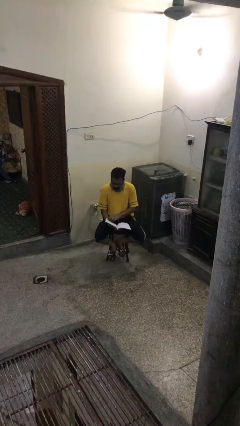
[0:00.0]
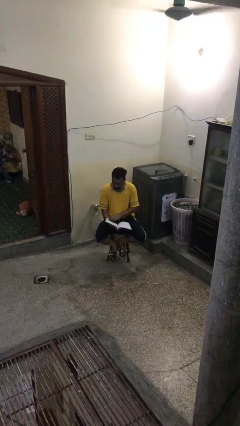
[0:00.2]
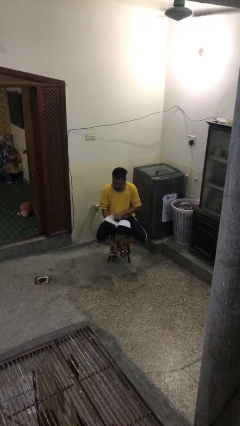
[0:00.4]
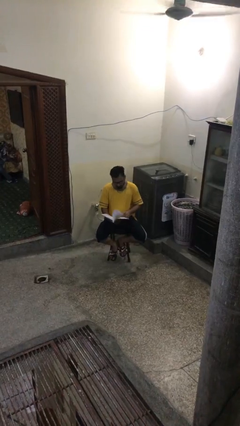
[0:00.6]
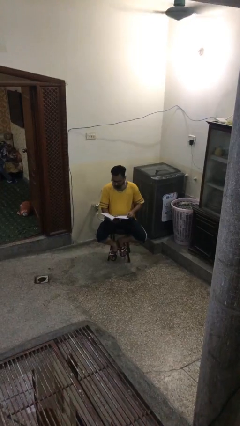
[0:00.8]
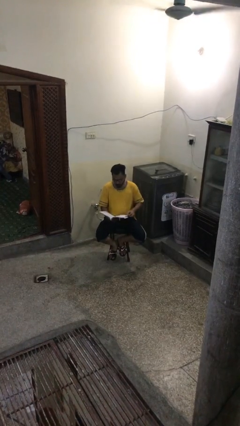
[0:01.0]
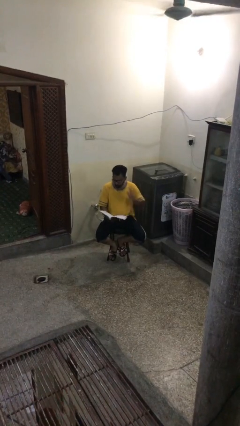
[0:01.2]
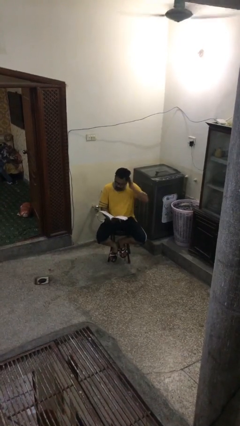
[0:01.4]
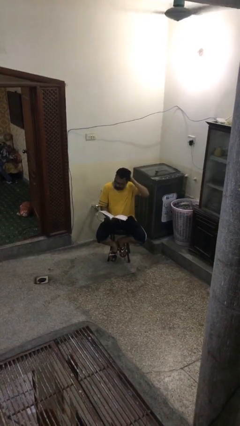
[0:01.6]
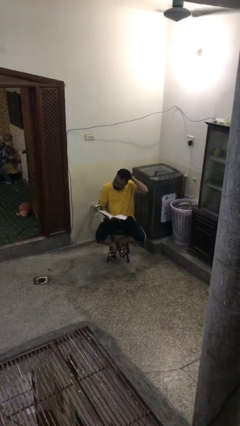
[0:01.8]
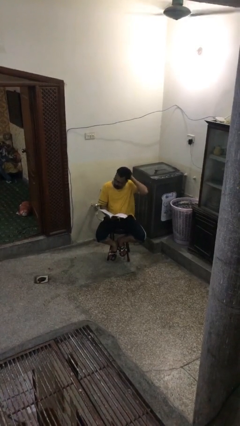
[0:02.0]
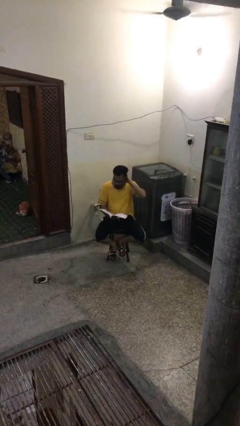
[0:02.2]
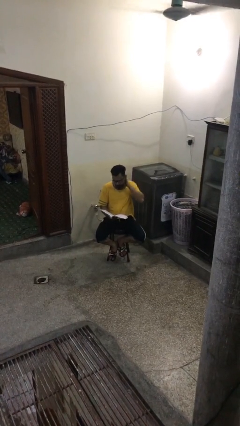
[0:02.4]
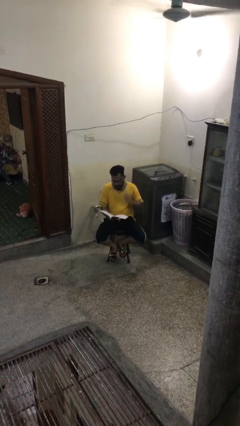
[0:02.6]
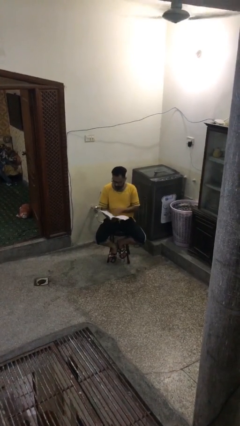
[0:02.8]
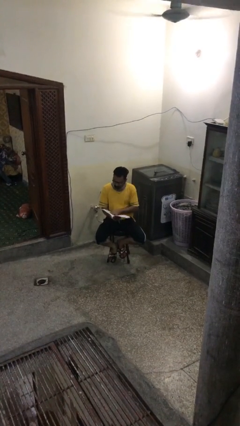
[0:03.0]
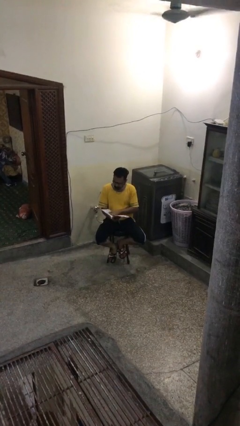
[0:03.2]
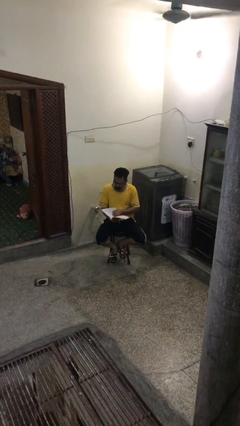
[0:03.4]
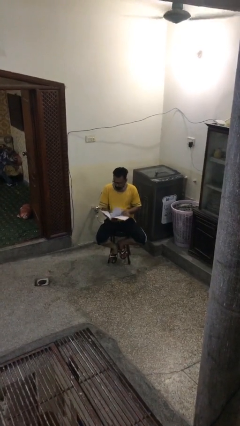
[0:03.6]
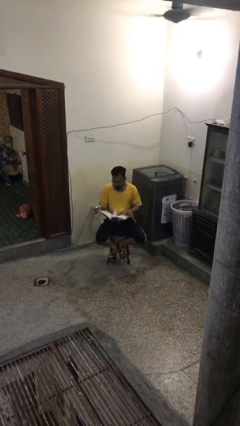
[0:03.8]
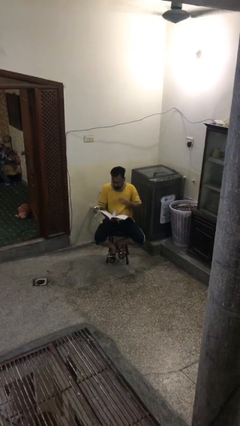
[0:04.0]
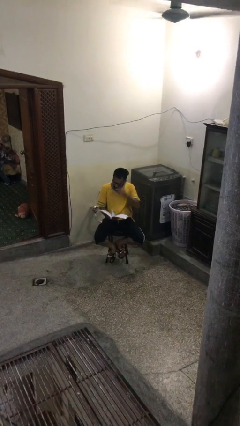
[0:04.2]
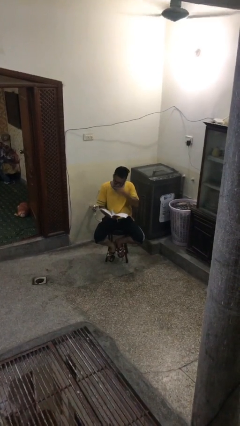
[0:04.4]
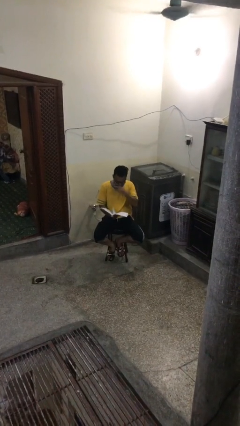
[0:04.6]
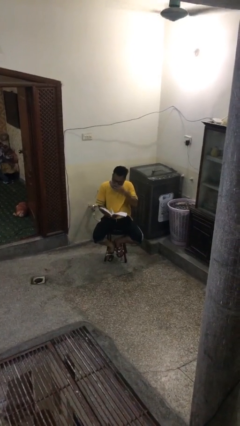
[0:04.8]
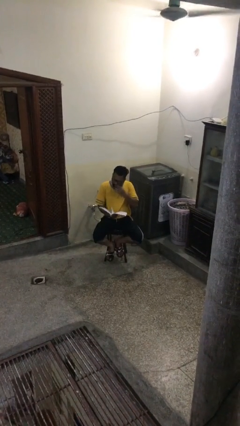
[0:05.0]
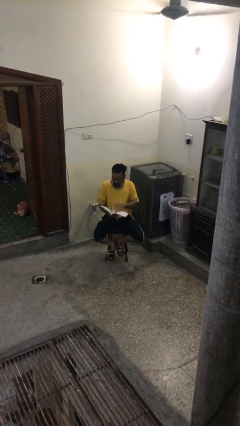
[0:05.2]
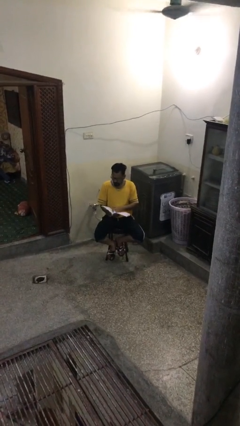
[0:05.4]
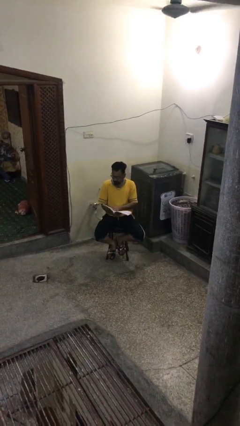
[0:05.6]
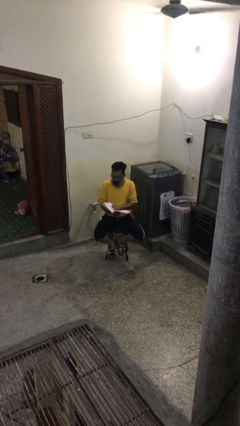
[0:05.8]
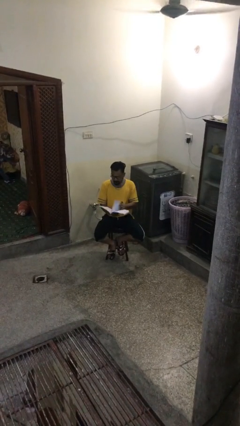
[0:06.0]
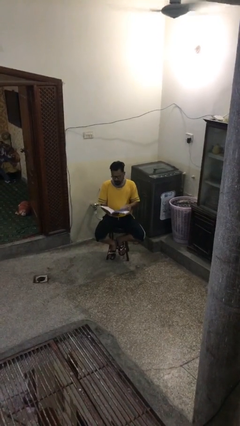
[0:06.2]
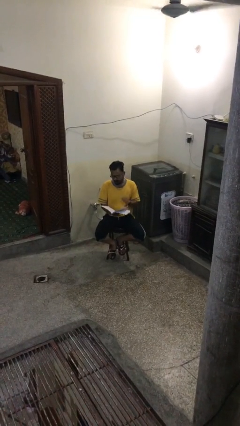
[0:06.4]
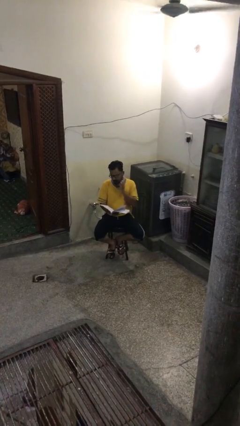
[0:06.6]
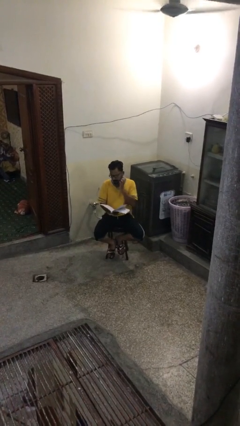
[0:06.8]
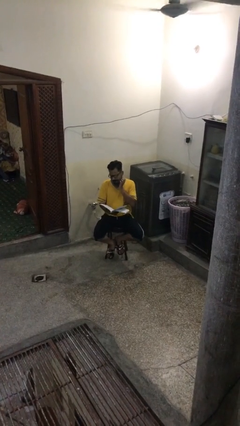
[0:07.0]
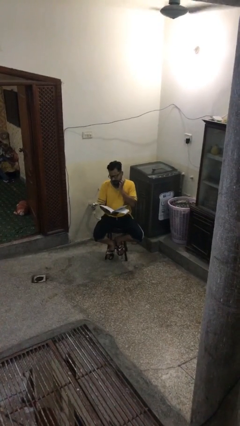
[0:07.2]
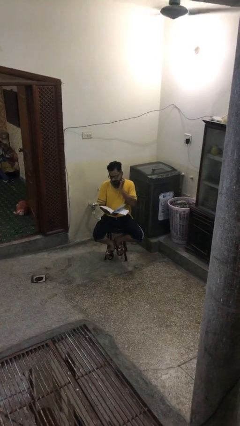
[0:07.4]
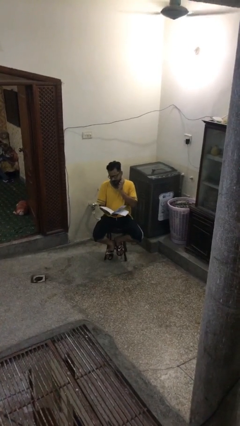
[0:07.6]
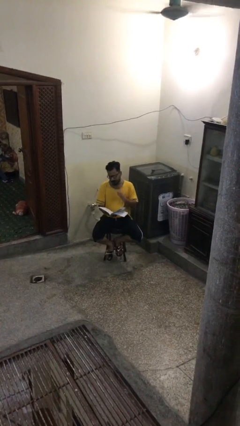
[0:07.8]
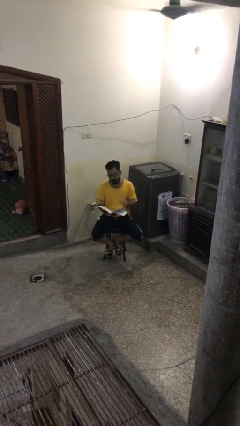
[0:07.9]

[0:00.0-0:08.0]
person reads document

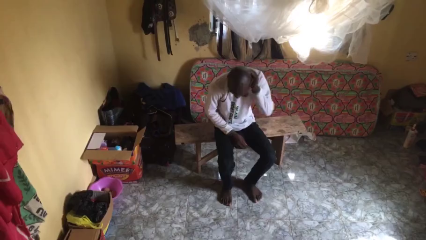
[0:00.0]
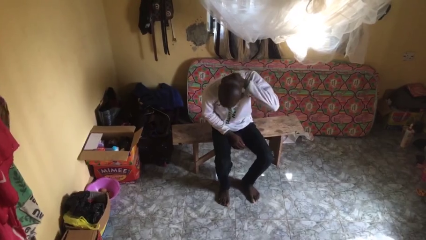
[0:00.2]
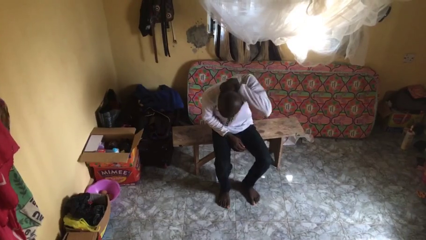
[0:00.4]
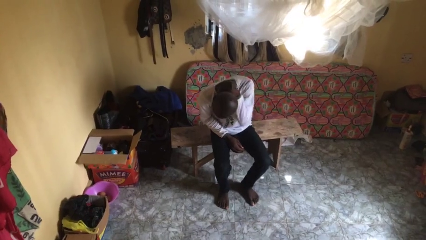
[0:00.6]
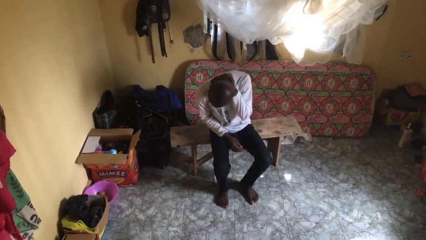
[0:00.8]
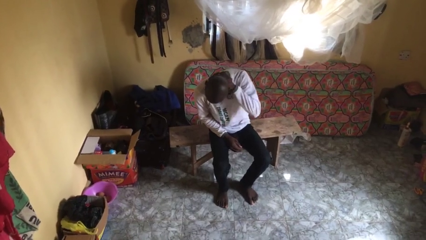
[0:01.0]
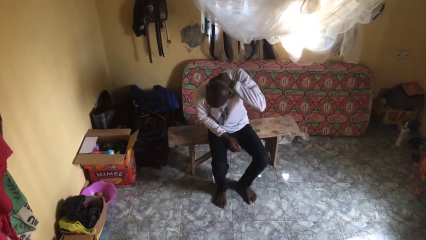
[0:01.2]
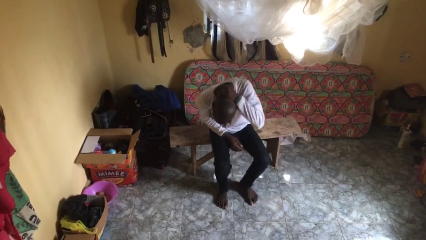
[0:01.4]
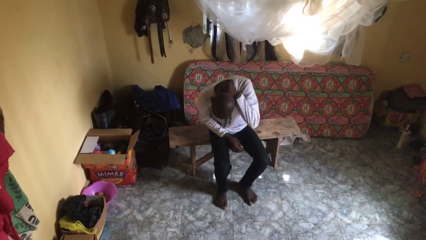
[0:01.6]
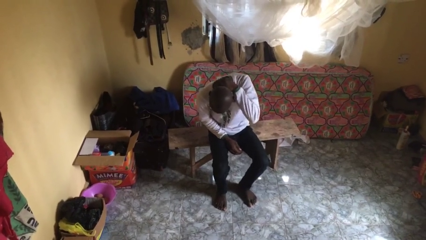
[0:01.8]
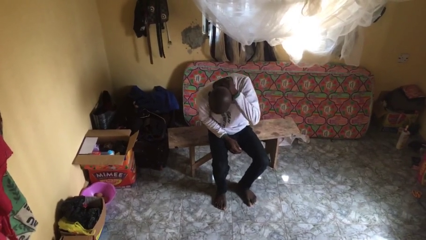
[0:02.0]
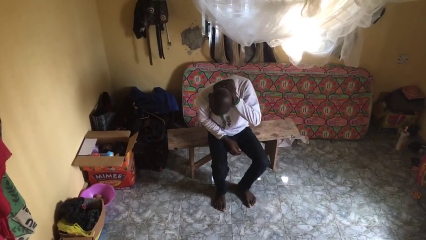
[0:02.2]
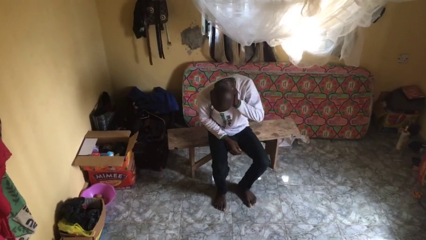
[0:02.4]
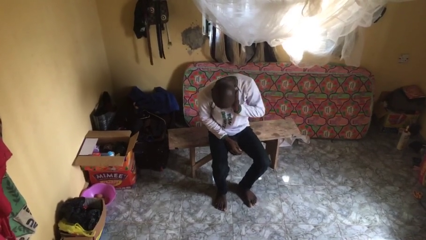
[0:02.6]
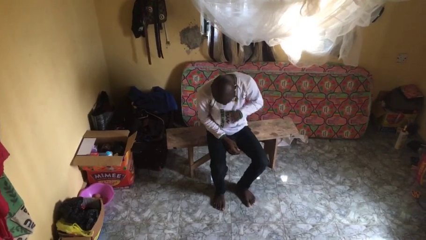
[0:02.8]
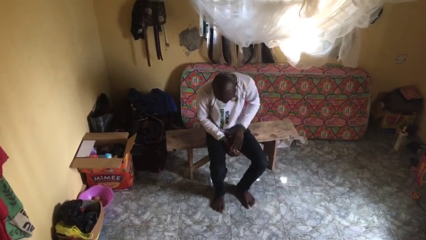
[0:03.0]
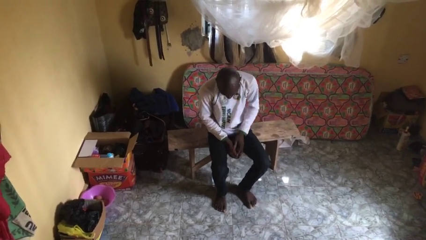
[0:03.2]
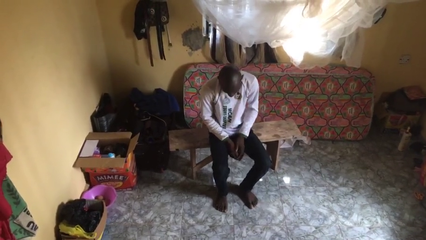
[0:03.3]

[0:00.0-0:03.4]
person rubs neck

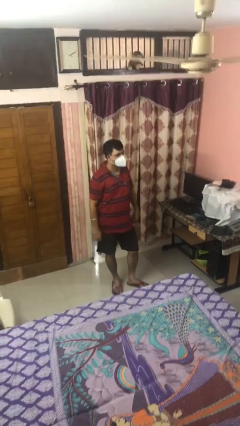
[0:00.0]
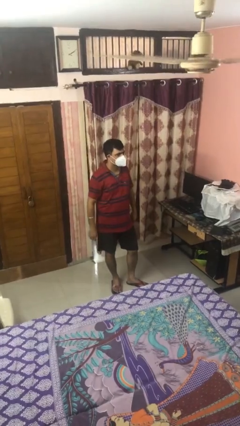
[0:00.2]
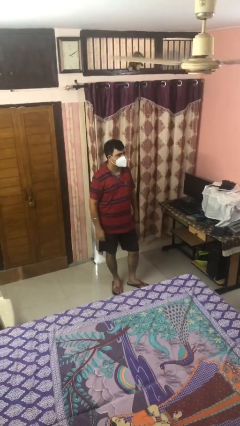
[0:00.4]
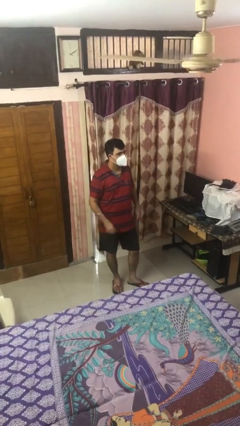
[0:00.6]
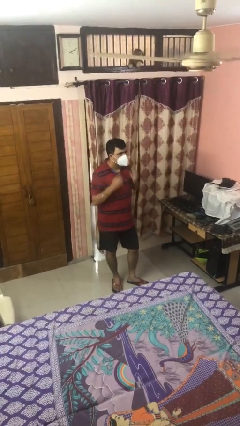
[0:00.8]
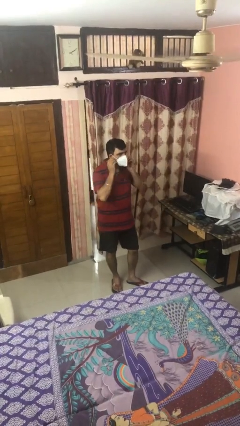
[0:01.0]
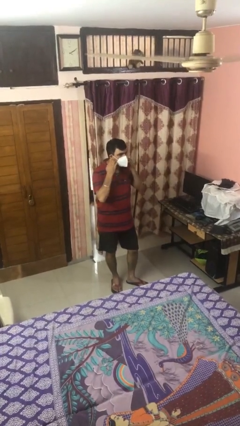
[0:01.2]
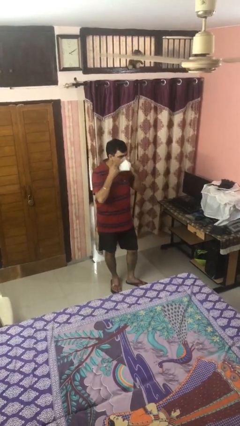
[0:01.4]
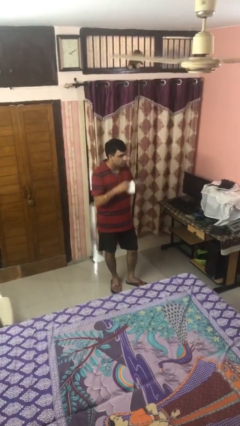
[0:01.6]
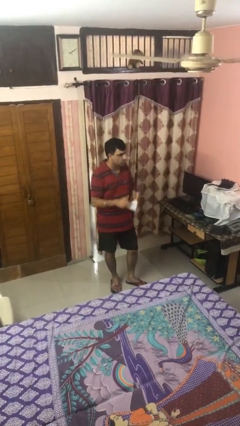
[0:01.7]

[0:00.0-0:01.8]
person takes off facemask

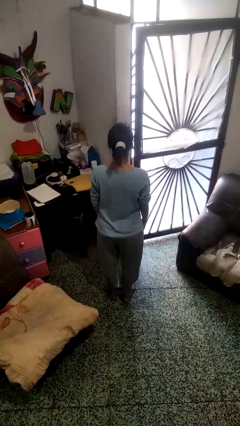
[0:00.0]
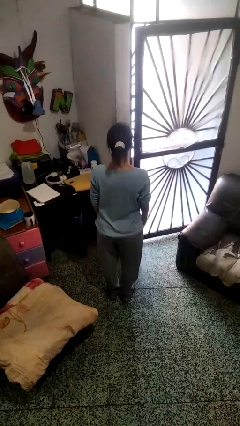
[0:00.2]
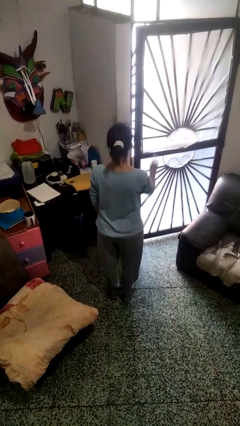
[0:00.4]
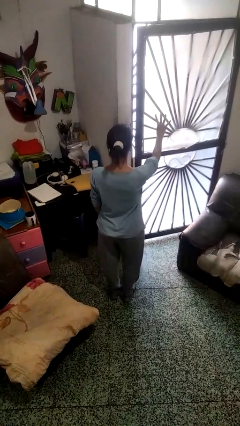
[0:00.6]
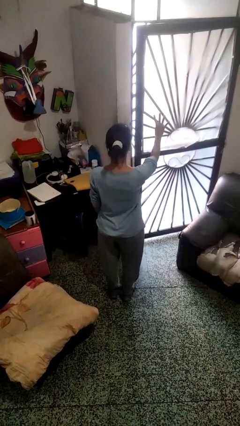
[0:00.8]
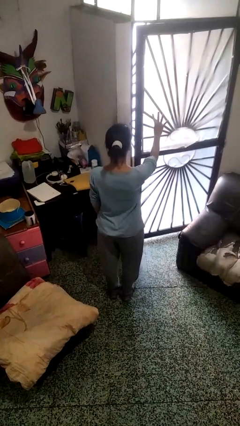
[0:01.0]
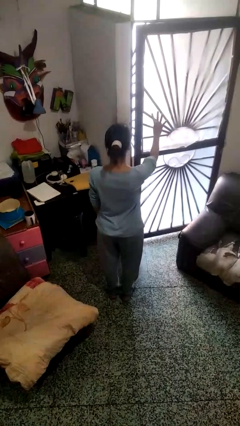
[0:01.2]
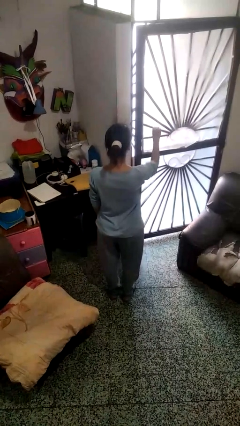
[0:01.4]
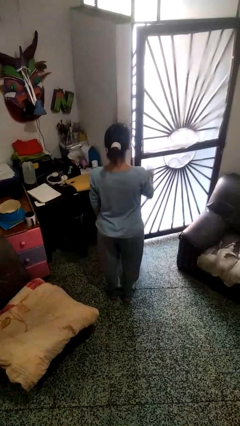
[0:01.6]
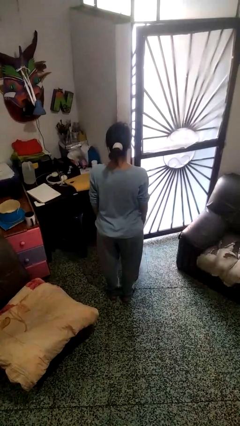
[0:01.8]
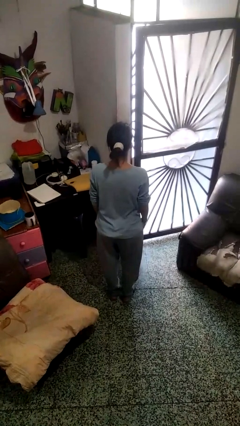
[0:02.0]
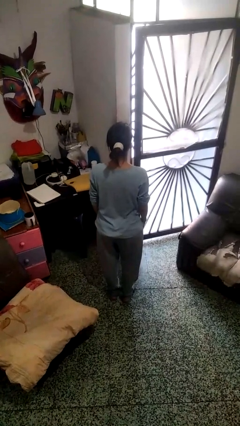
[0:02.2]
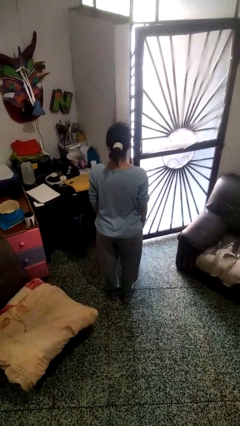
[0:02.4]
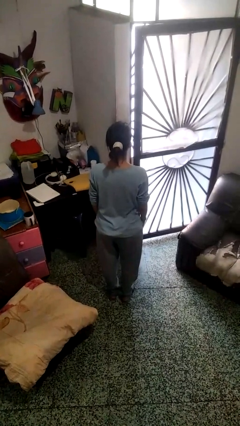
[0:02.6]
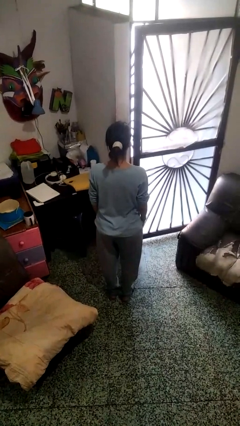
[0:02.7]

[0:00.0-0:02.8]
person gestures number four

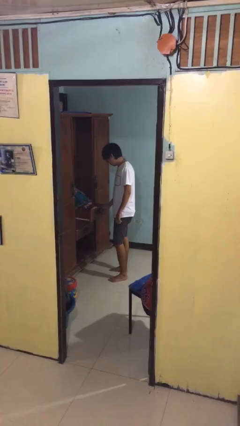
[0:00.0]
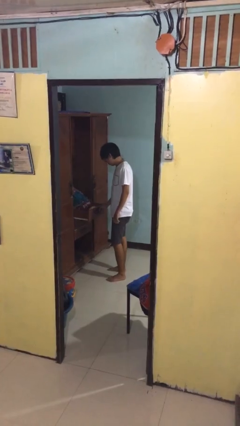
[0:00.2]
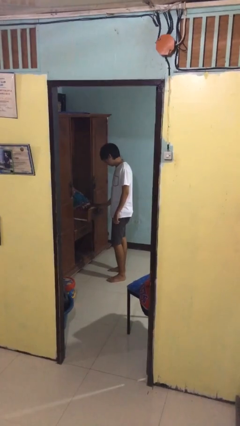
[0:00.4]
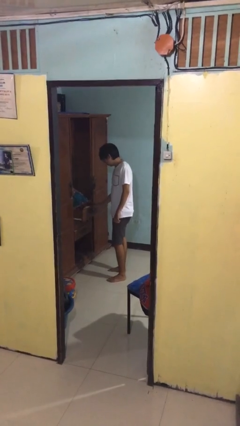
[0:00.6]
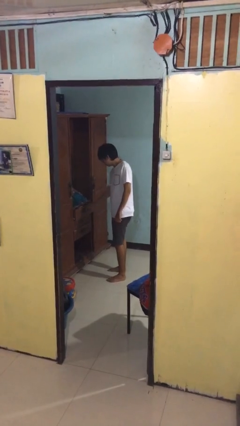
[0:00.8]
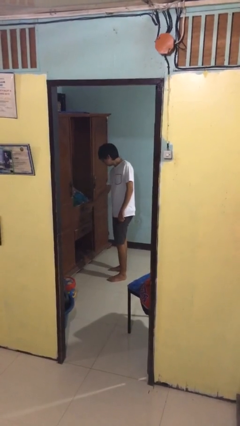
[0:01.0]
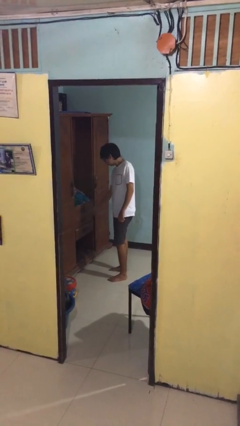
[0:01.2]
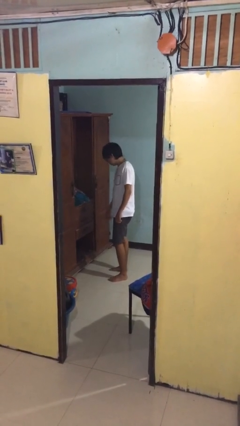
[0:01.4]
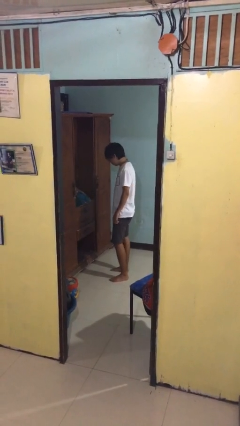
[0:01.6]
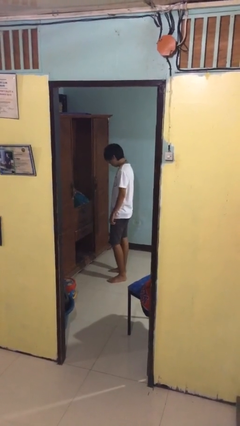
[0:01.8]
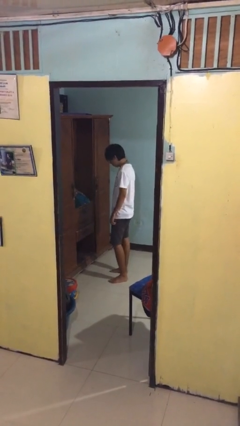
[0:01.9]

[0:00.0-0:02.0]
person closes dresser drawer
